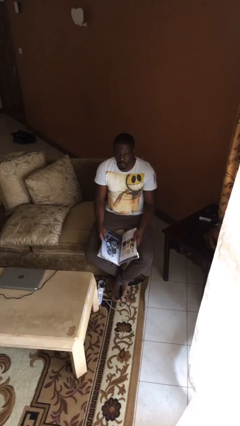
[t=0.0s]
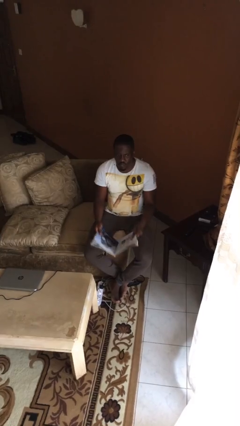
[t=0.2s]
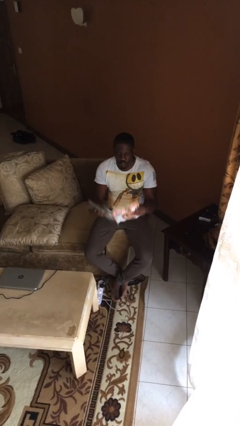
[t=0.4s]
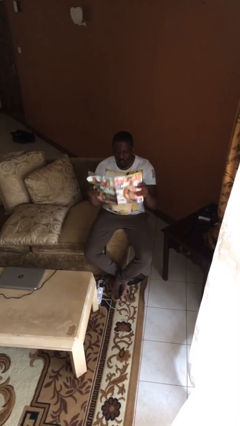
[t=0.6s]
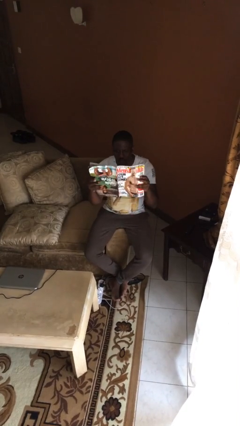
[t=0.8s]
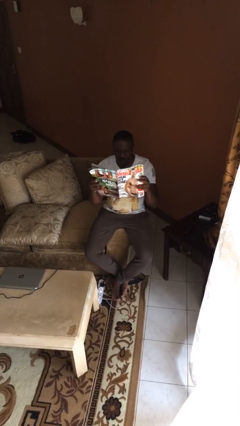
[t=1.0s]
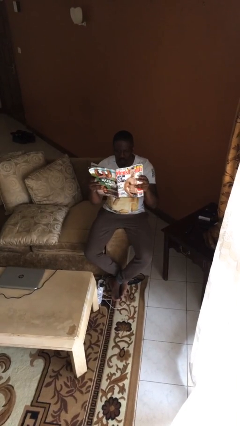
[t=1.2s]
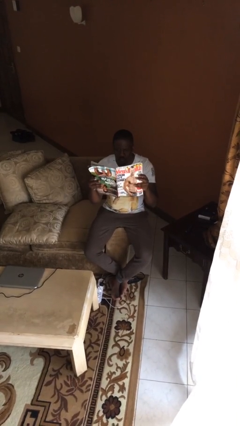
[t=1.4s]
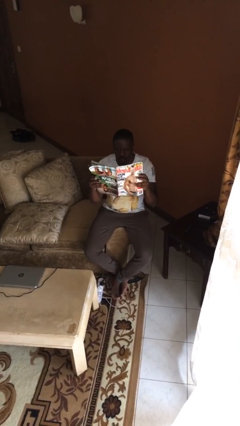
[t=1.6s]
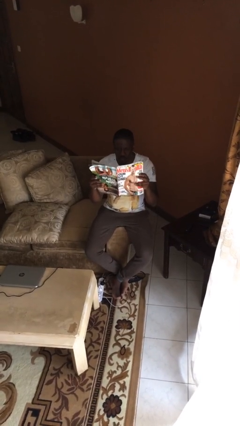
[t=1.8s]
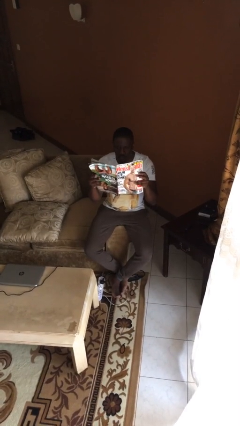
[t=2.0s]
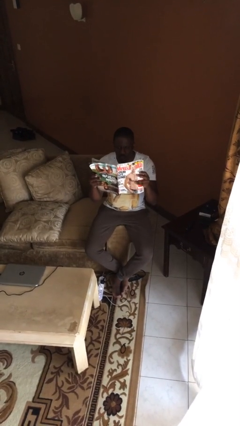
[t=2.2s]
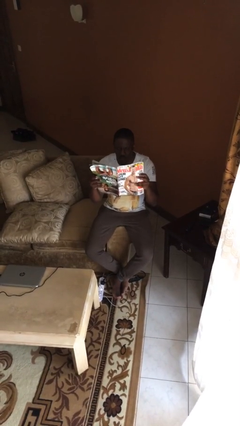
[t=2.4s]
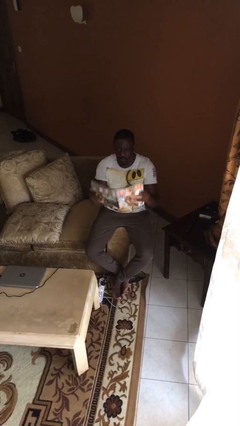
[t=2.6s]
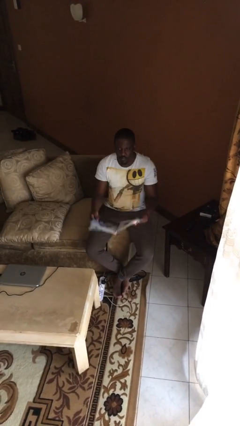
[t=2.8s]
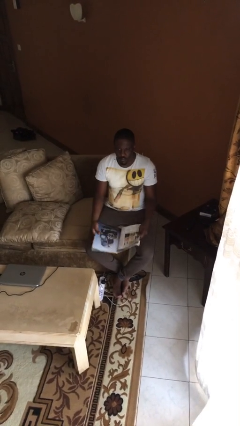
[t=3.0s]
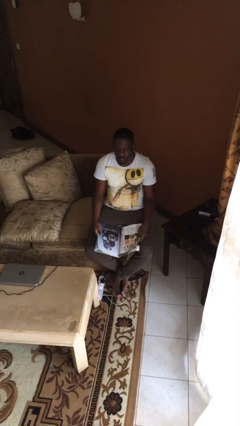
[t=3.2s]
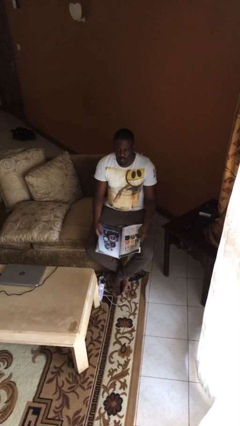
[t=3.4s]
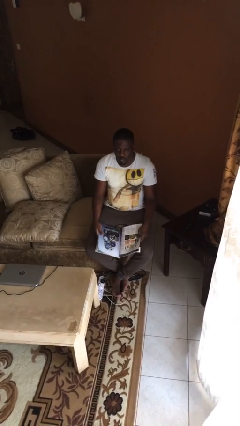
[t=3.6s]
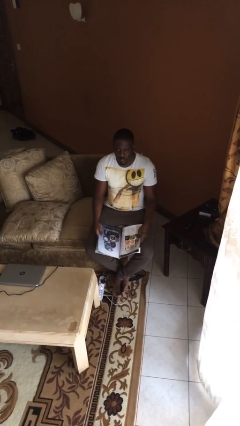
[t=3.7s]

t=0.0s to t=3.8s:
person reads document

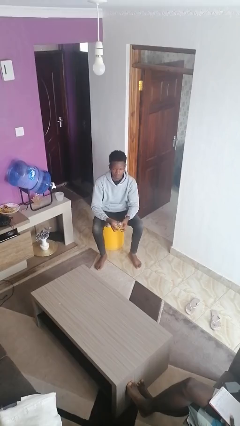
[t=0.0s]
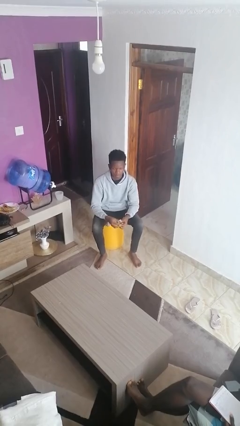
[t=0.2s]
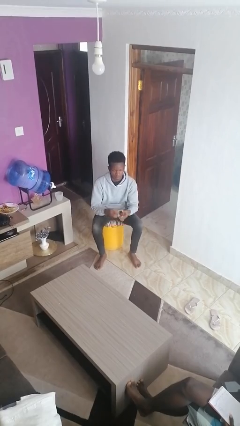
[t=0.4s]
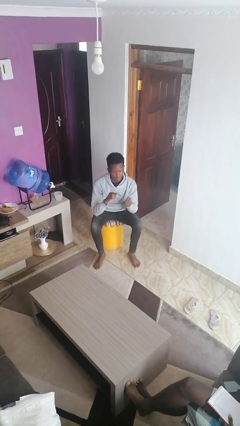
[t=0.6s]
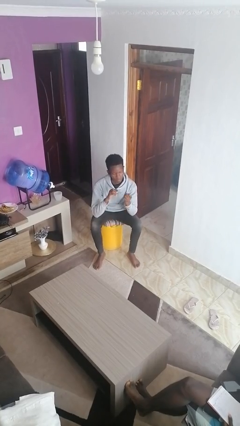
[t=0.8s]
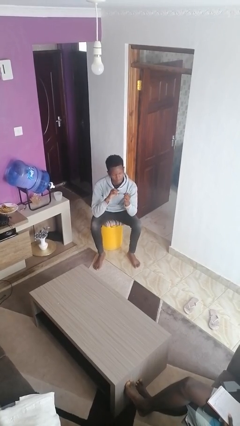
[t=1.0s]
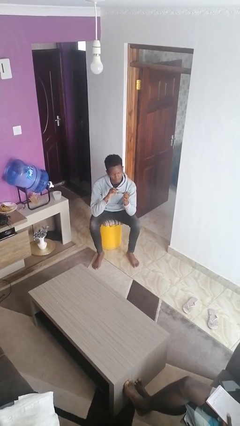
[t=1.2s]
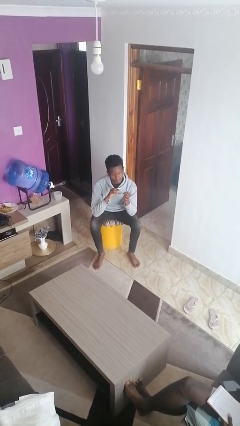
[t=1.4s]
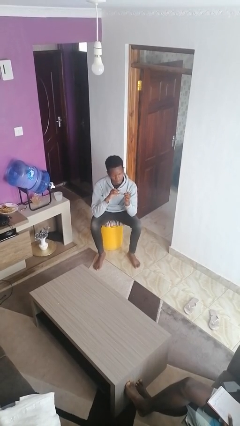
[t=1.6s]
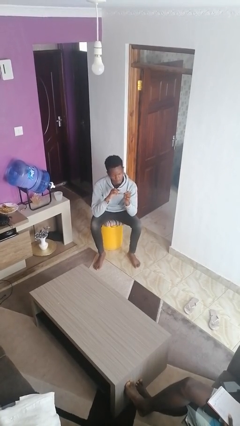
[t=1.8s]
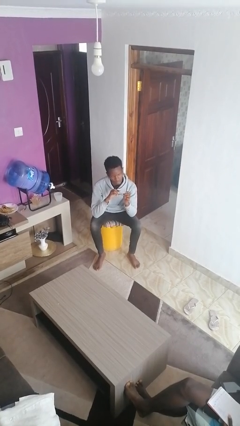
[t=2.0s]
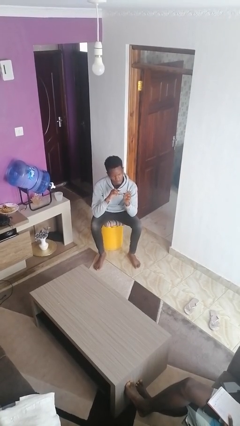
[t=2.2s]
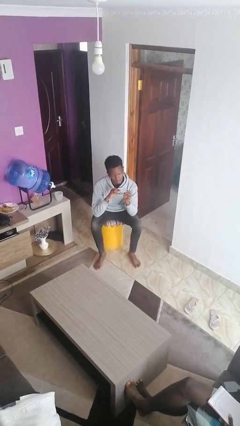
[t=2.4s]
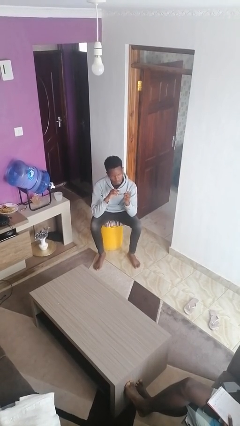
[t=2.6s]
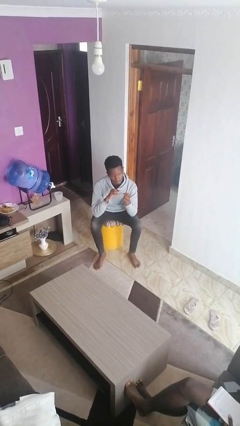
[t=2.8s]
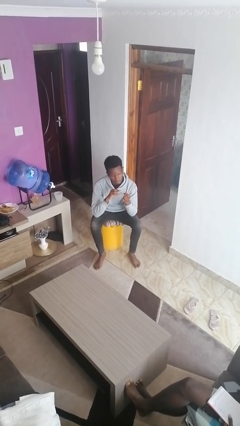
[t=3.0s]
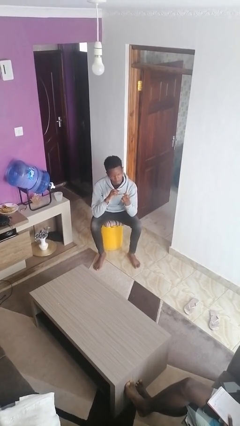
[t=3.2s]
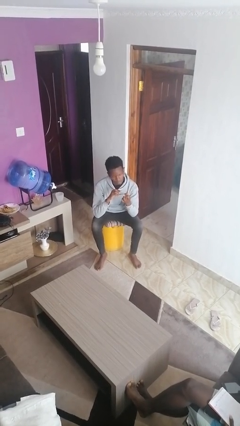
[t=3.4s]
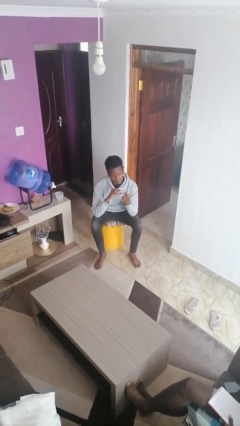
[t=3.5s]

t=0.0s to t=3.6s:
person clips fingernails

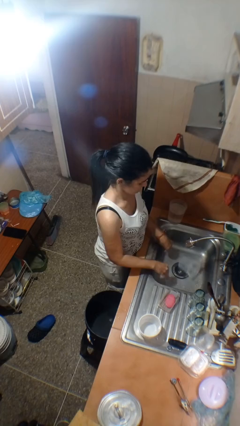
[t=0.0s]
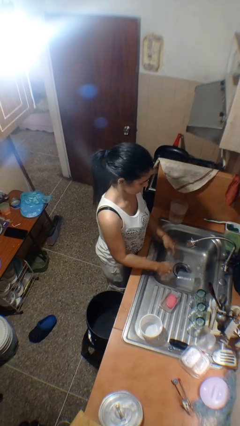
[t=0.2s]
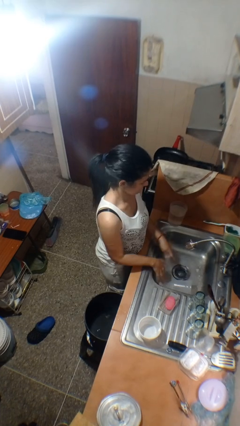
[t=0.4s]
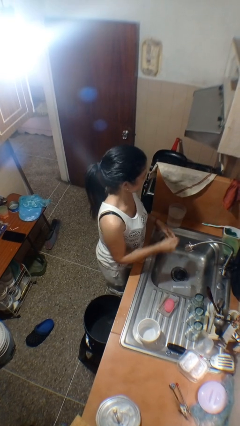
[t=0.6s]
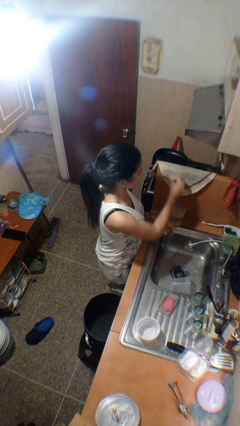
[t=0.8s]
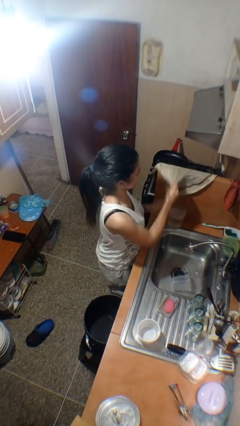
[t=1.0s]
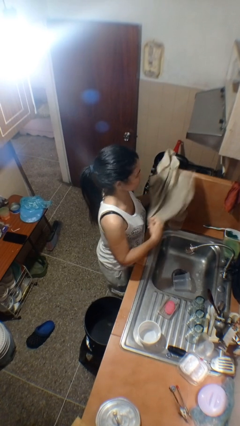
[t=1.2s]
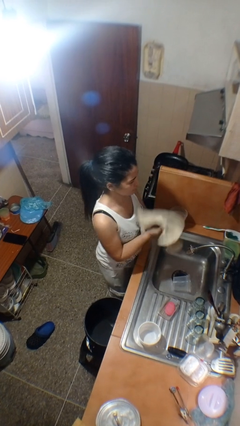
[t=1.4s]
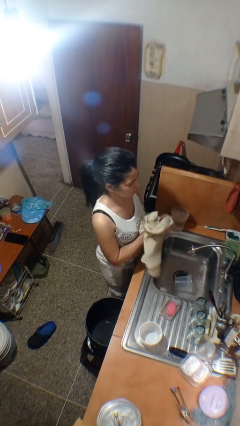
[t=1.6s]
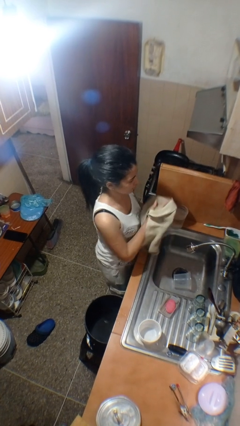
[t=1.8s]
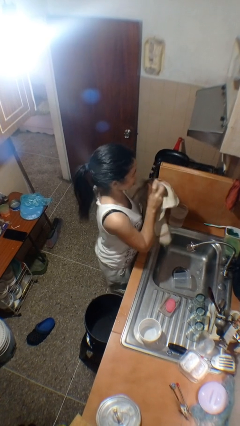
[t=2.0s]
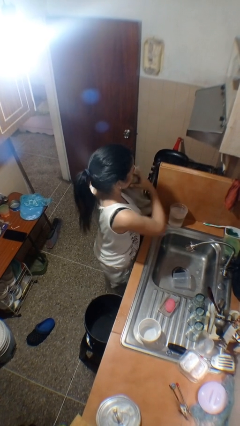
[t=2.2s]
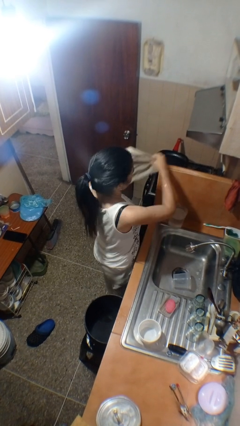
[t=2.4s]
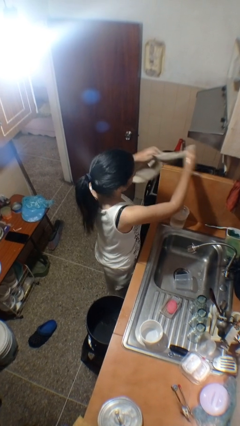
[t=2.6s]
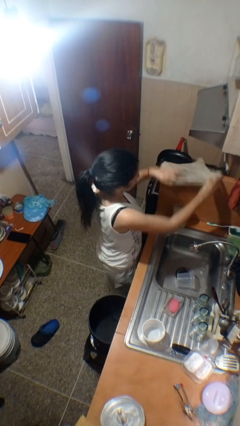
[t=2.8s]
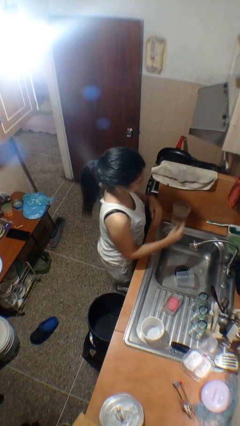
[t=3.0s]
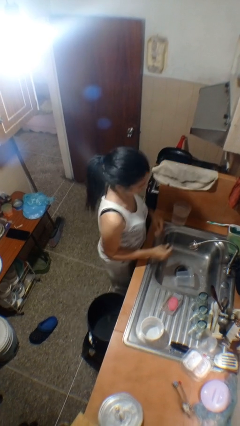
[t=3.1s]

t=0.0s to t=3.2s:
person dries hands with towel

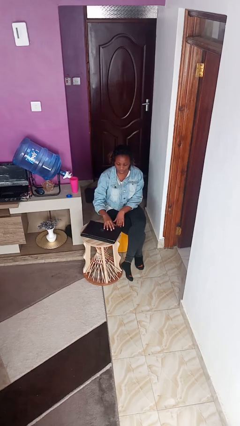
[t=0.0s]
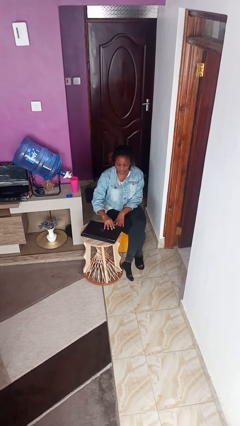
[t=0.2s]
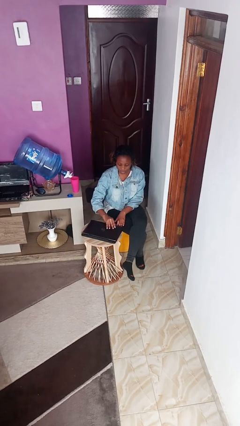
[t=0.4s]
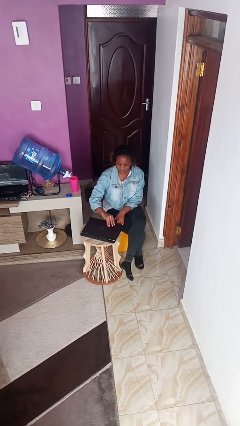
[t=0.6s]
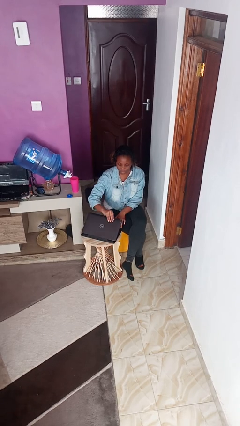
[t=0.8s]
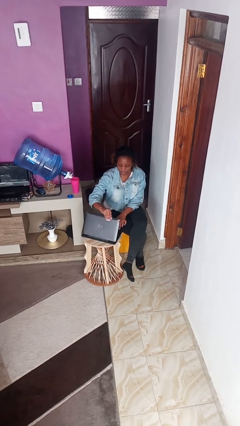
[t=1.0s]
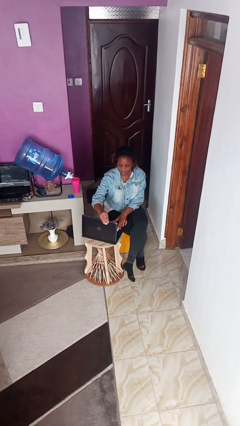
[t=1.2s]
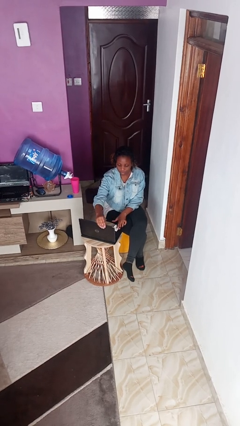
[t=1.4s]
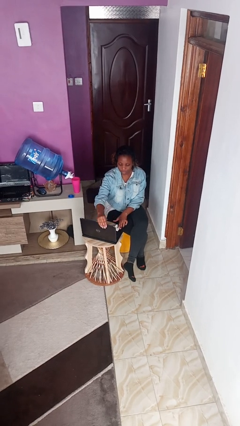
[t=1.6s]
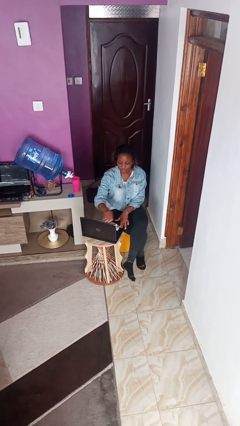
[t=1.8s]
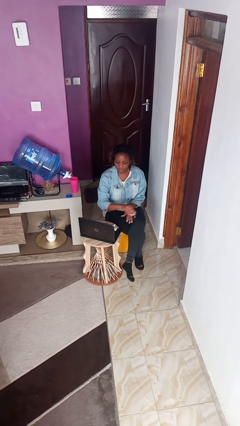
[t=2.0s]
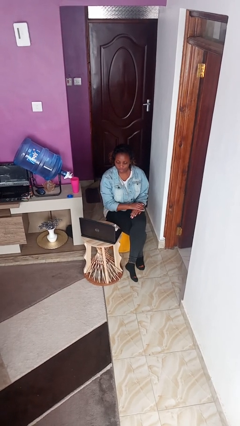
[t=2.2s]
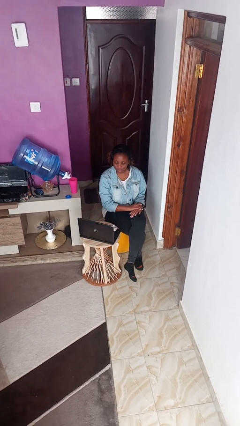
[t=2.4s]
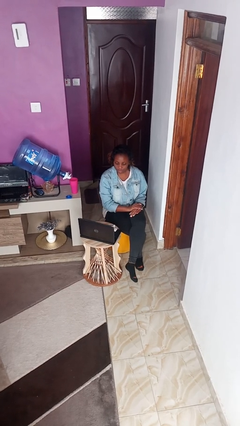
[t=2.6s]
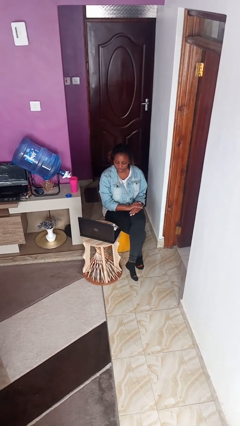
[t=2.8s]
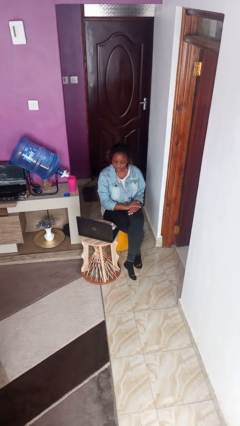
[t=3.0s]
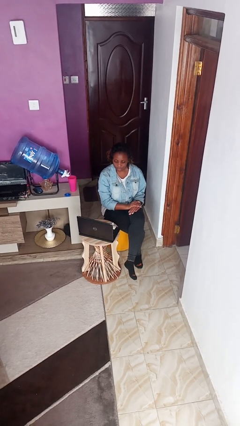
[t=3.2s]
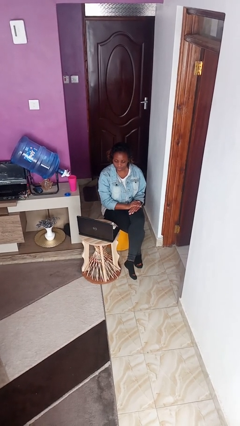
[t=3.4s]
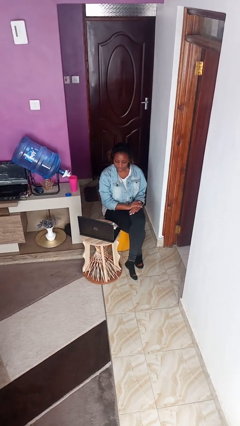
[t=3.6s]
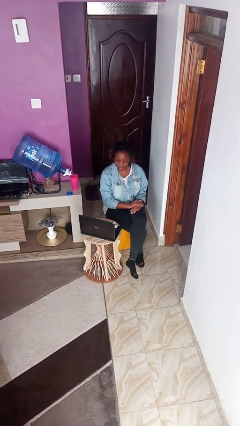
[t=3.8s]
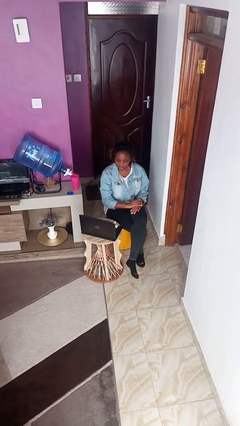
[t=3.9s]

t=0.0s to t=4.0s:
person opens laptop

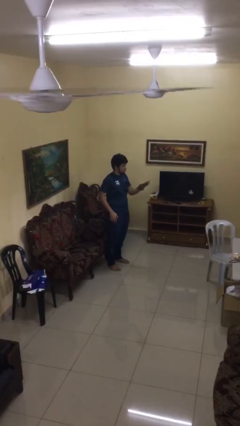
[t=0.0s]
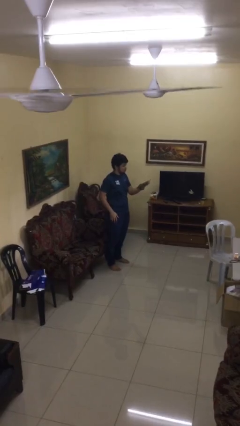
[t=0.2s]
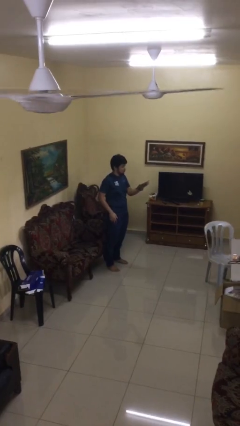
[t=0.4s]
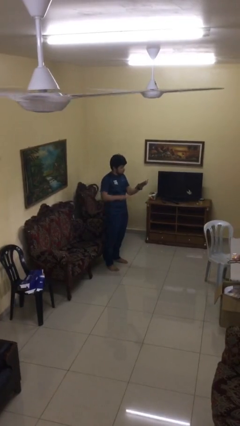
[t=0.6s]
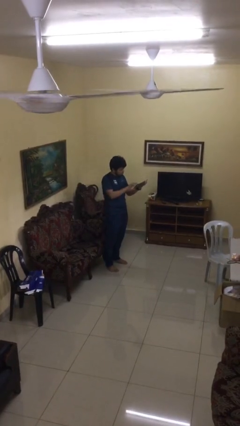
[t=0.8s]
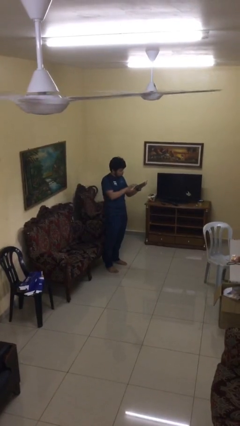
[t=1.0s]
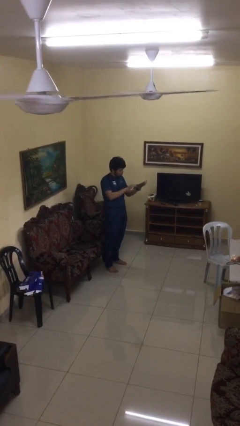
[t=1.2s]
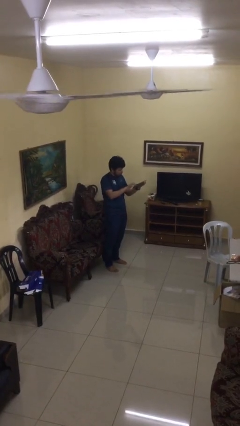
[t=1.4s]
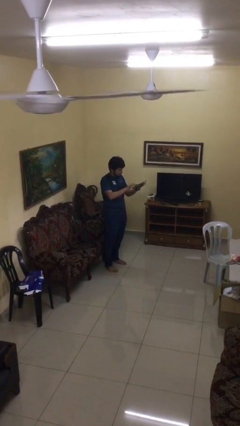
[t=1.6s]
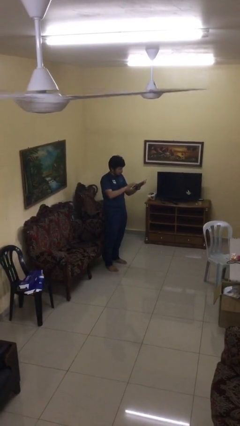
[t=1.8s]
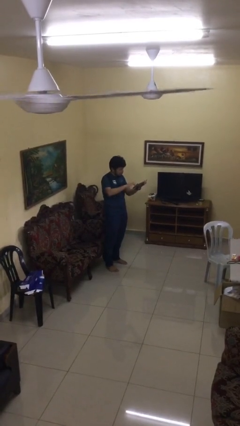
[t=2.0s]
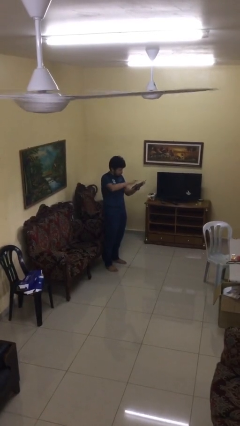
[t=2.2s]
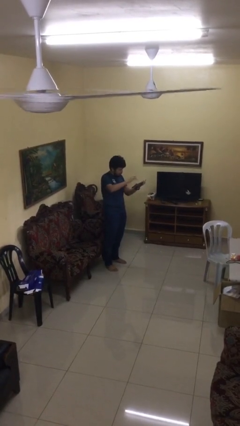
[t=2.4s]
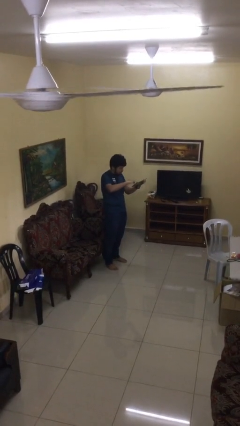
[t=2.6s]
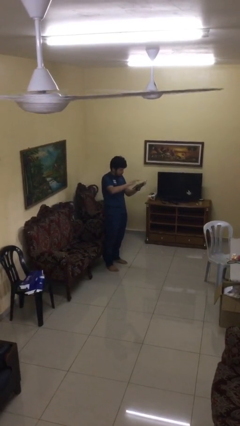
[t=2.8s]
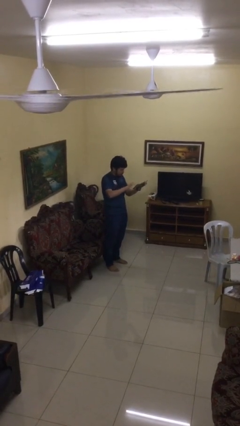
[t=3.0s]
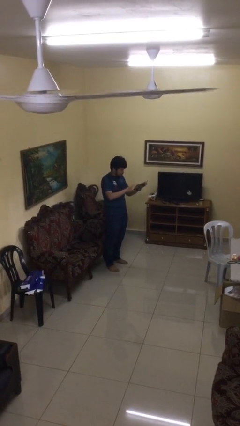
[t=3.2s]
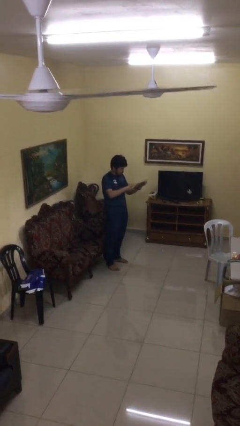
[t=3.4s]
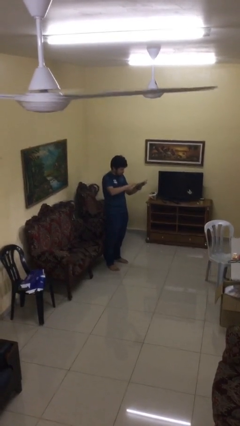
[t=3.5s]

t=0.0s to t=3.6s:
person interacts with tablet
